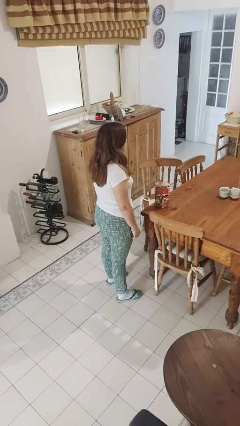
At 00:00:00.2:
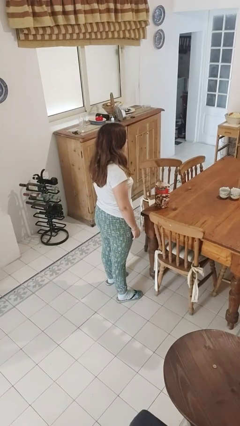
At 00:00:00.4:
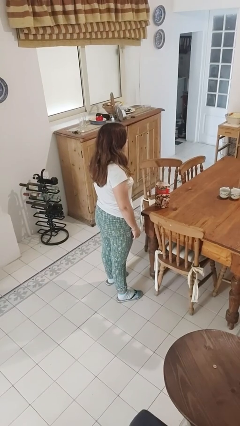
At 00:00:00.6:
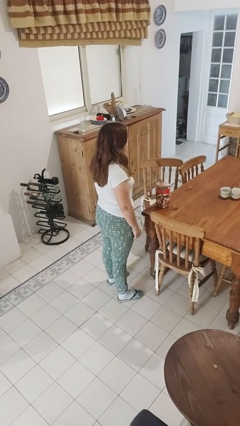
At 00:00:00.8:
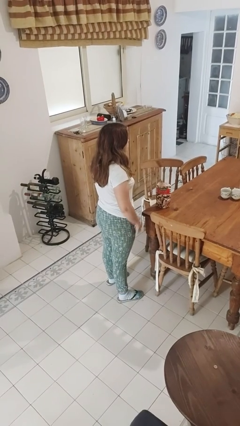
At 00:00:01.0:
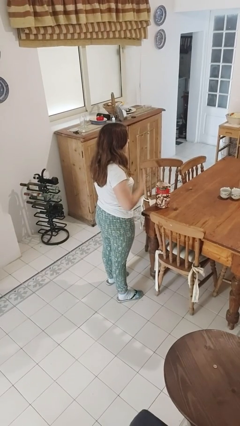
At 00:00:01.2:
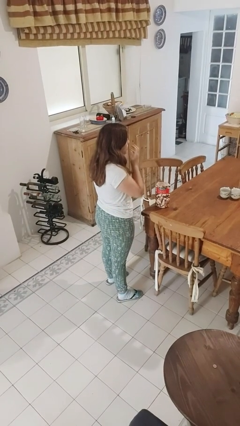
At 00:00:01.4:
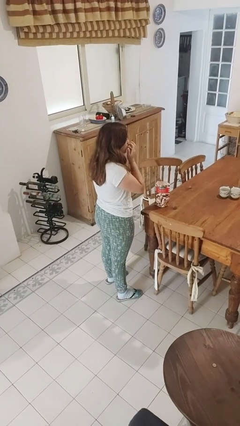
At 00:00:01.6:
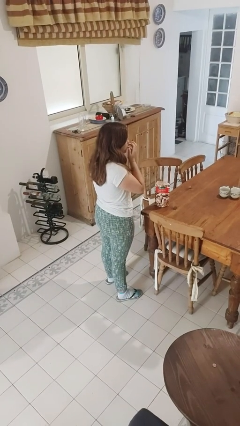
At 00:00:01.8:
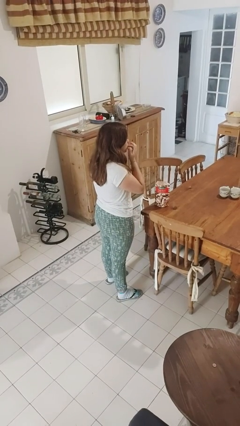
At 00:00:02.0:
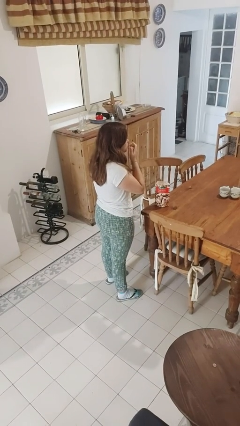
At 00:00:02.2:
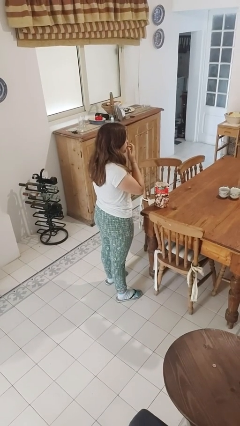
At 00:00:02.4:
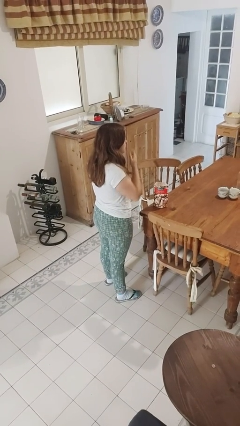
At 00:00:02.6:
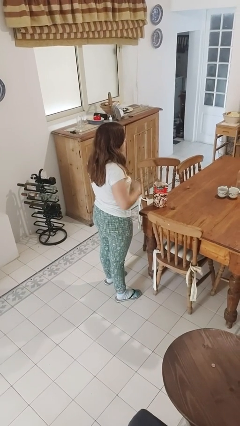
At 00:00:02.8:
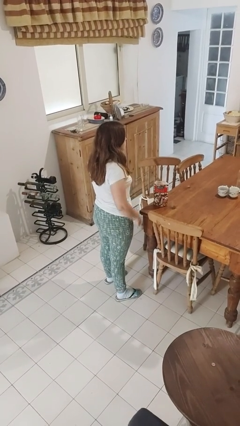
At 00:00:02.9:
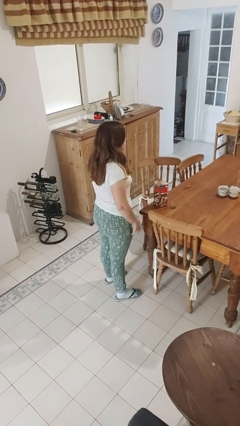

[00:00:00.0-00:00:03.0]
person licks fingers

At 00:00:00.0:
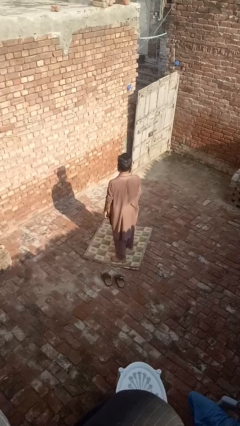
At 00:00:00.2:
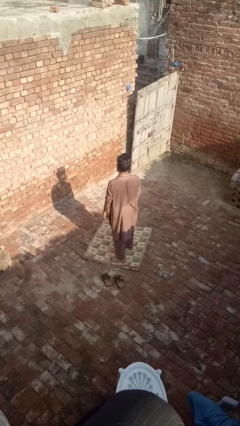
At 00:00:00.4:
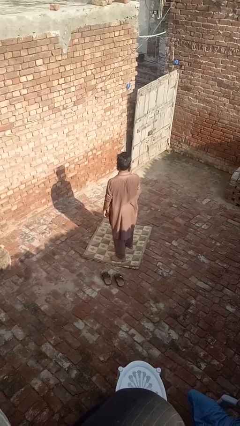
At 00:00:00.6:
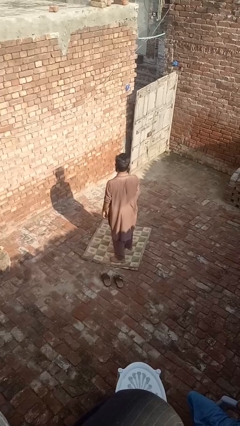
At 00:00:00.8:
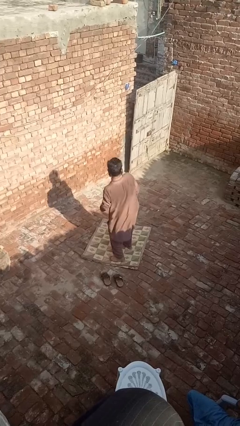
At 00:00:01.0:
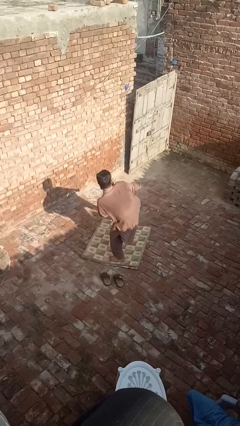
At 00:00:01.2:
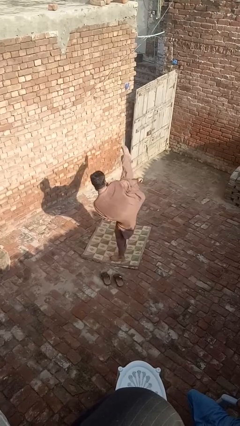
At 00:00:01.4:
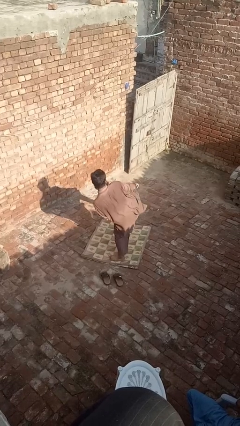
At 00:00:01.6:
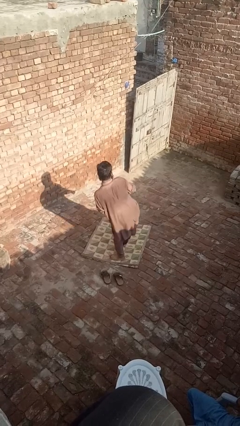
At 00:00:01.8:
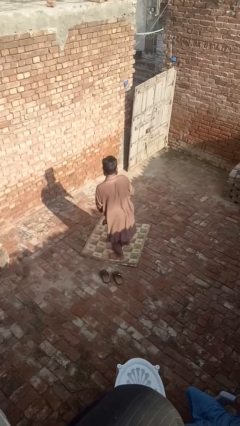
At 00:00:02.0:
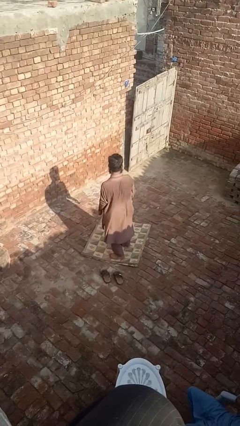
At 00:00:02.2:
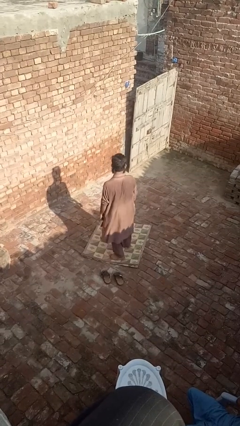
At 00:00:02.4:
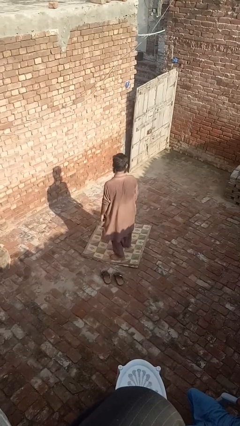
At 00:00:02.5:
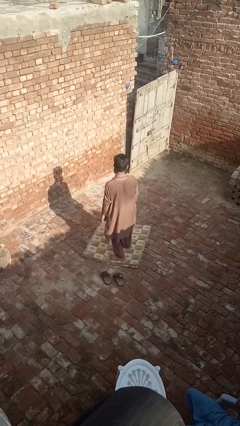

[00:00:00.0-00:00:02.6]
person karate kicks

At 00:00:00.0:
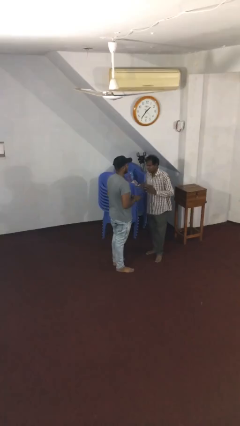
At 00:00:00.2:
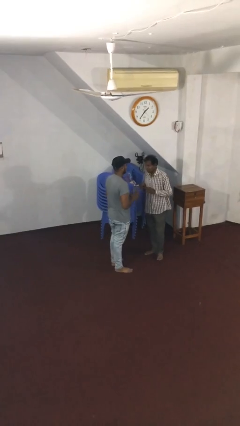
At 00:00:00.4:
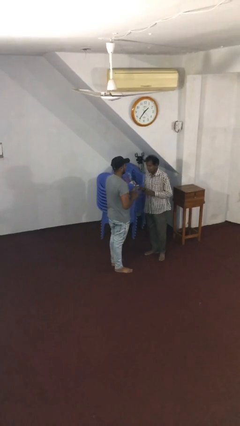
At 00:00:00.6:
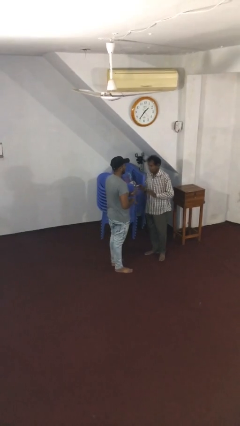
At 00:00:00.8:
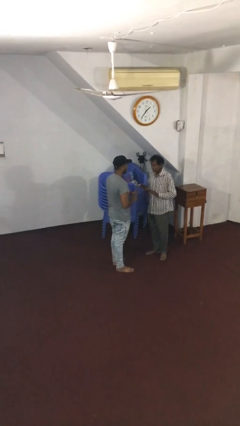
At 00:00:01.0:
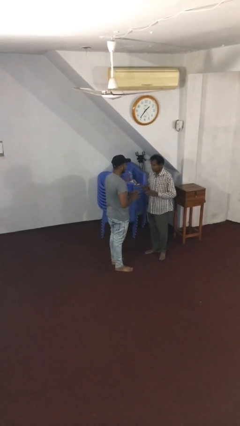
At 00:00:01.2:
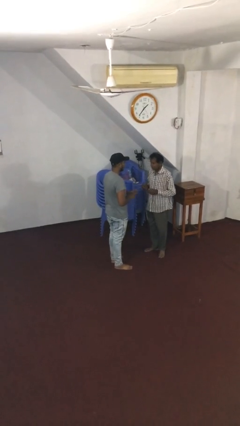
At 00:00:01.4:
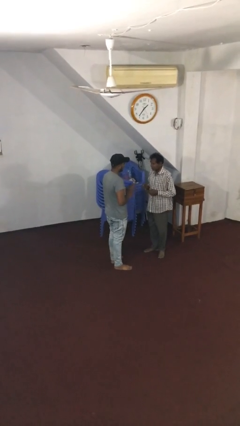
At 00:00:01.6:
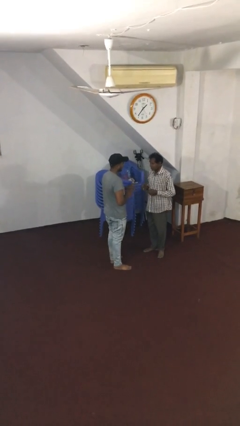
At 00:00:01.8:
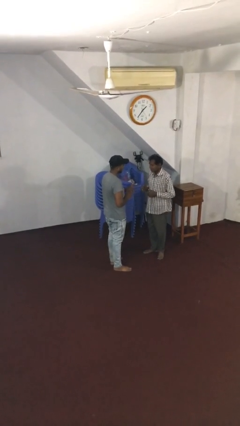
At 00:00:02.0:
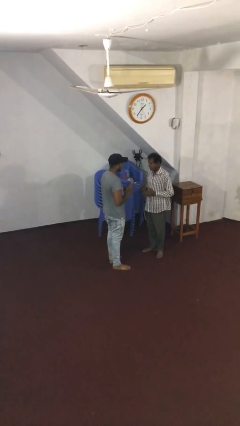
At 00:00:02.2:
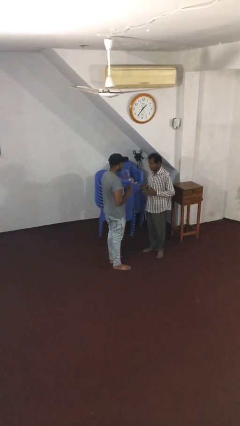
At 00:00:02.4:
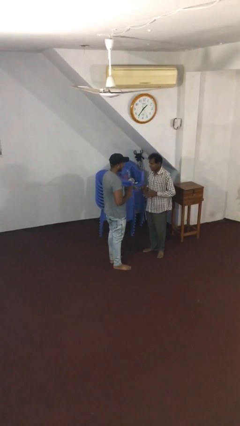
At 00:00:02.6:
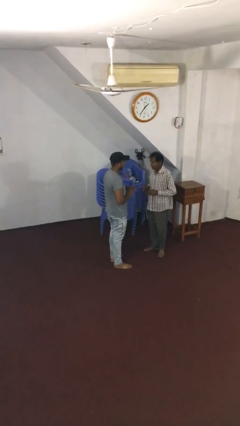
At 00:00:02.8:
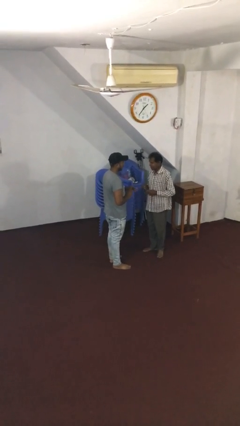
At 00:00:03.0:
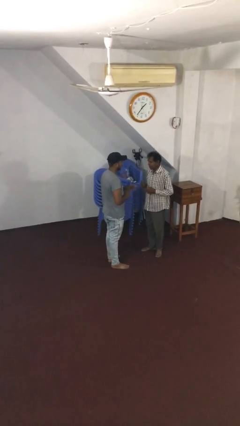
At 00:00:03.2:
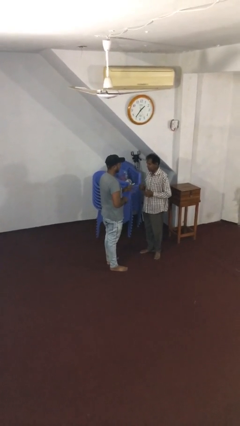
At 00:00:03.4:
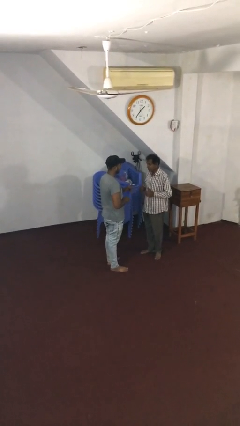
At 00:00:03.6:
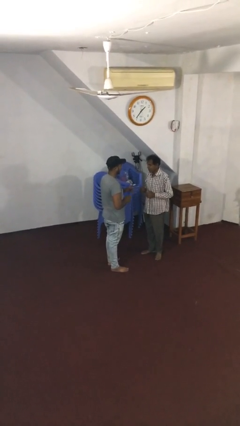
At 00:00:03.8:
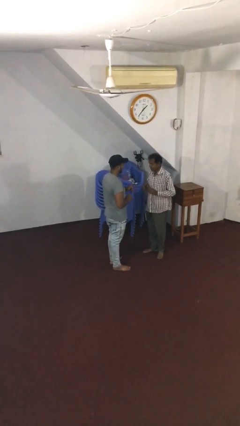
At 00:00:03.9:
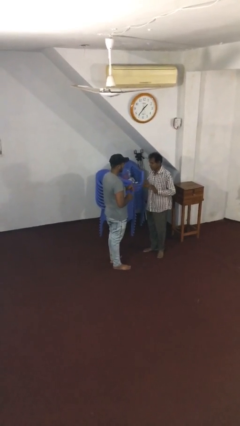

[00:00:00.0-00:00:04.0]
person talks to person

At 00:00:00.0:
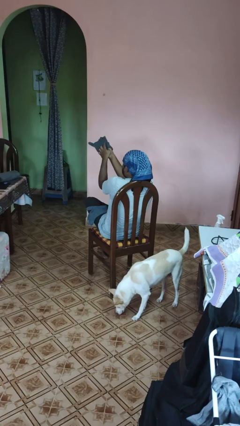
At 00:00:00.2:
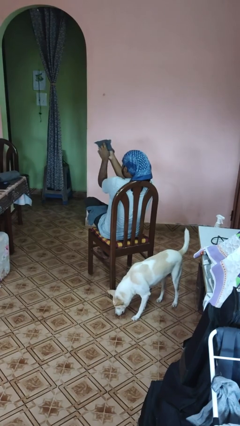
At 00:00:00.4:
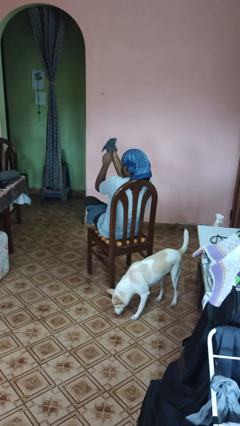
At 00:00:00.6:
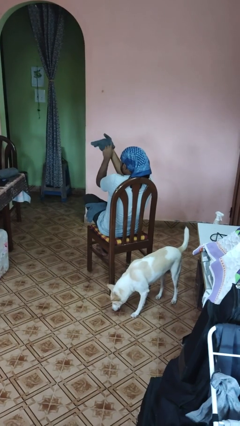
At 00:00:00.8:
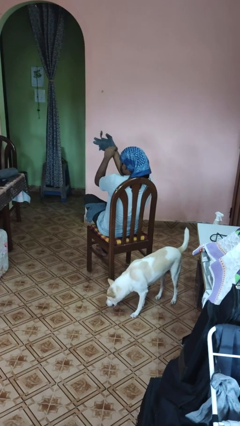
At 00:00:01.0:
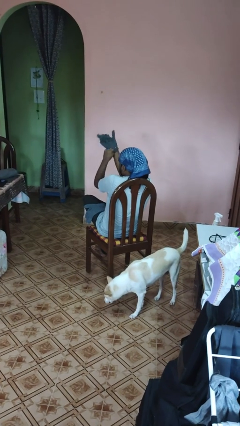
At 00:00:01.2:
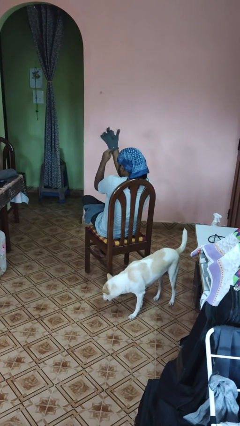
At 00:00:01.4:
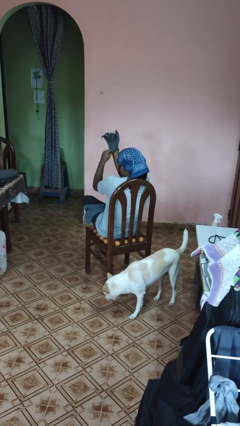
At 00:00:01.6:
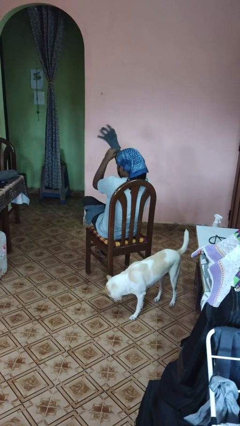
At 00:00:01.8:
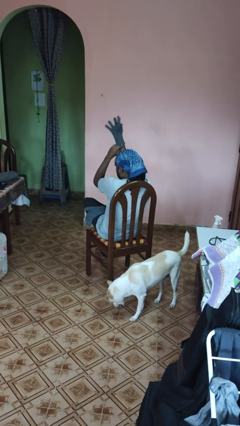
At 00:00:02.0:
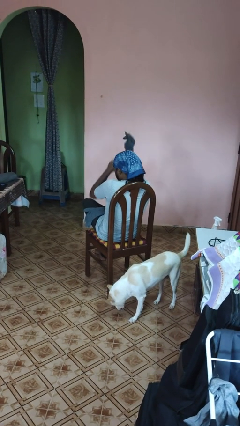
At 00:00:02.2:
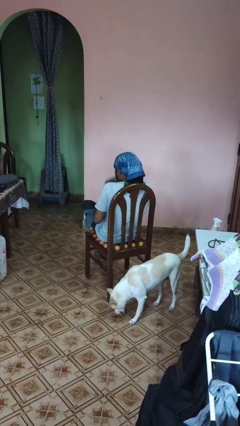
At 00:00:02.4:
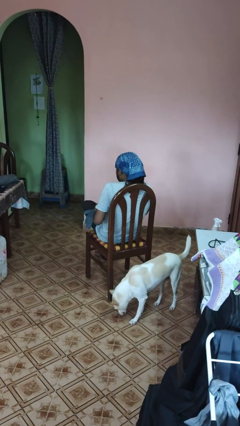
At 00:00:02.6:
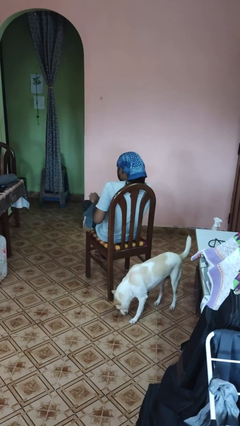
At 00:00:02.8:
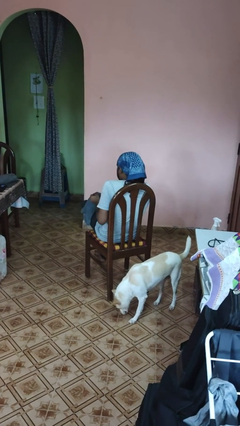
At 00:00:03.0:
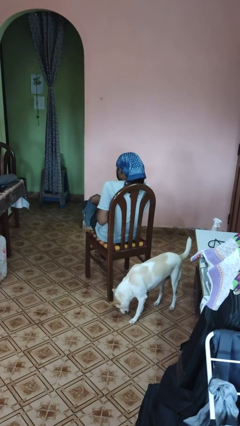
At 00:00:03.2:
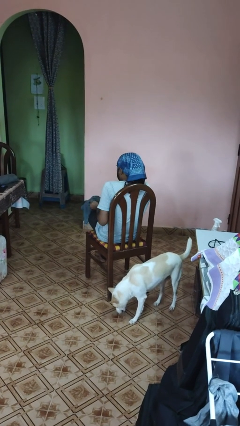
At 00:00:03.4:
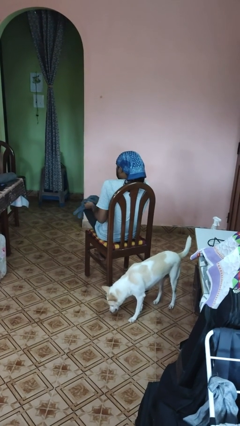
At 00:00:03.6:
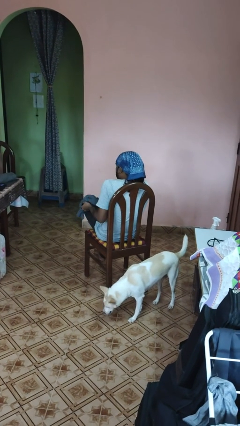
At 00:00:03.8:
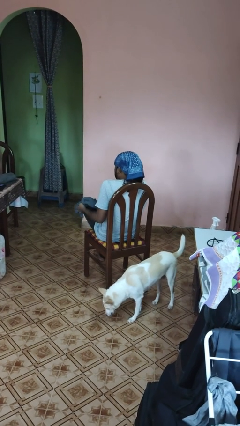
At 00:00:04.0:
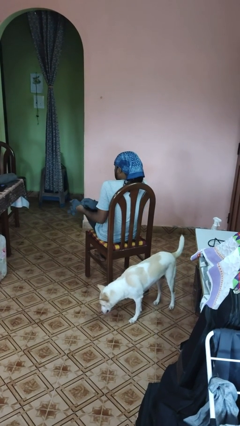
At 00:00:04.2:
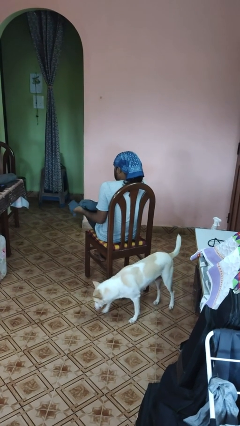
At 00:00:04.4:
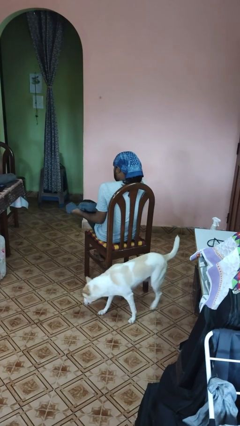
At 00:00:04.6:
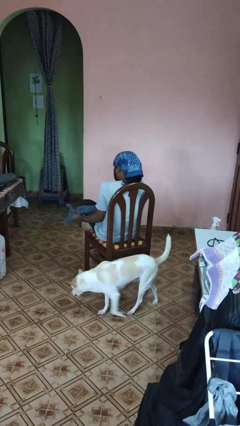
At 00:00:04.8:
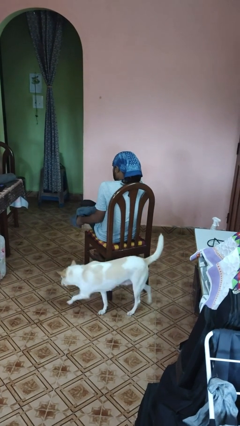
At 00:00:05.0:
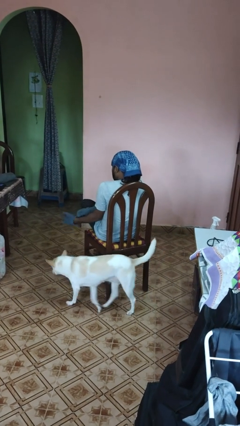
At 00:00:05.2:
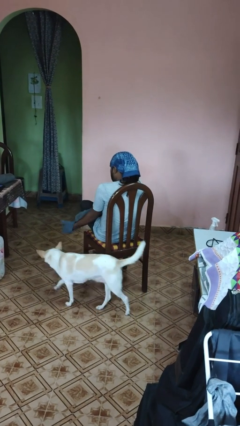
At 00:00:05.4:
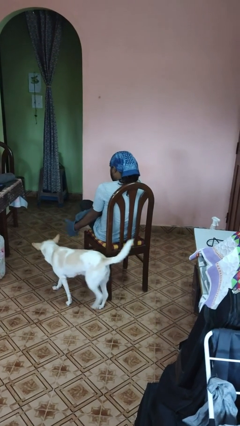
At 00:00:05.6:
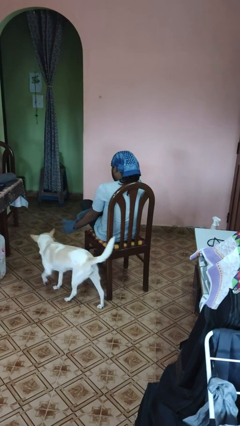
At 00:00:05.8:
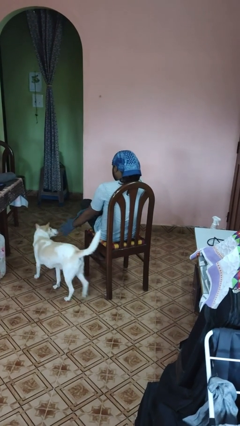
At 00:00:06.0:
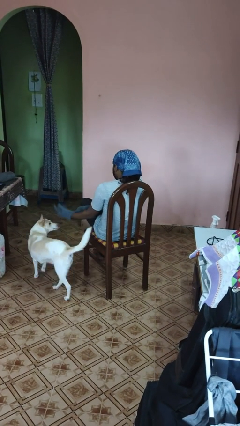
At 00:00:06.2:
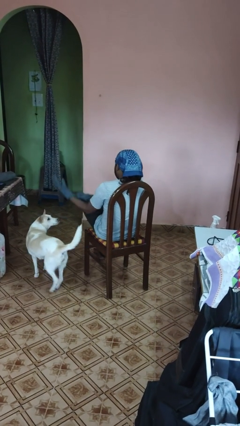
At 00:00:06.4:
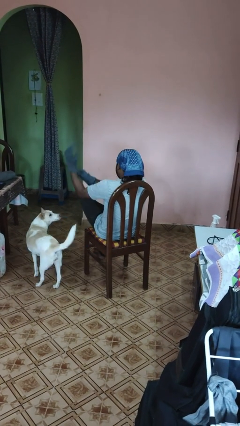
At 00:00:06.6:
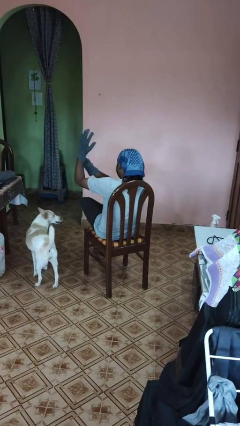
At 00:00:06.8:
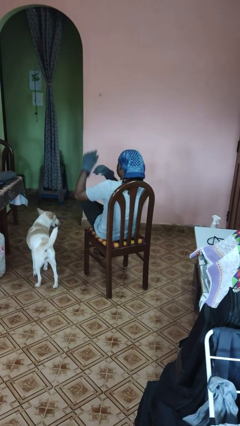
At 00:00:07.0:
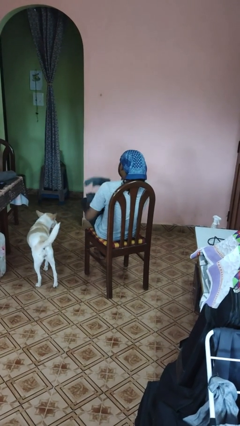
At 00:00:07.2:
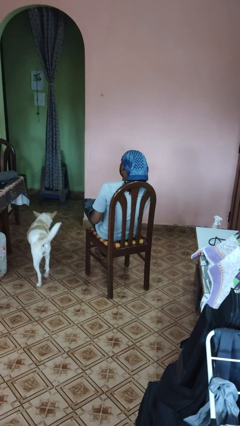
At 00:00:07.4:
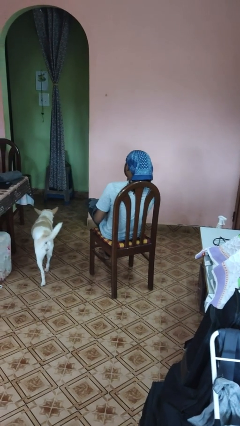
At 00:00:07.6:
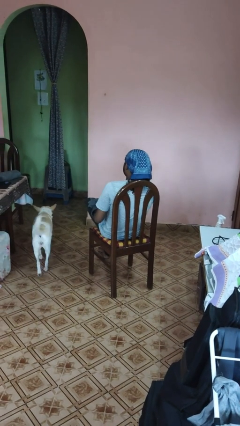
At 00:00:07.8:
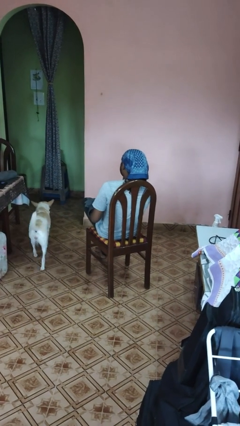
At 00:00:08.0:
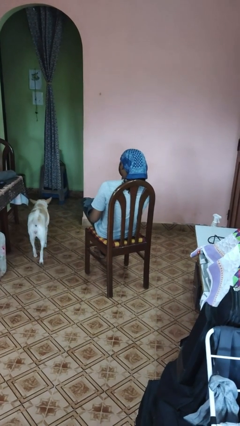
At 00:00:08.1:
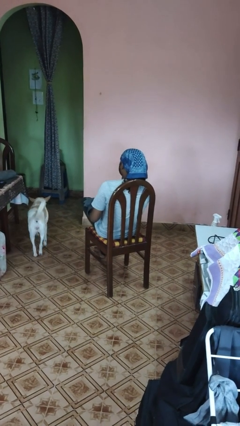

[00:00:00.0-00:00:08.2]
person puts on gloves
